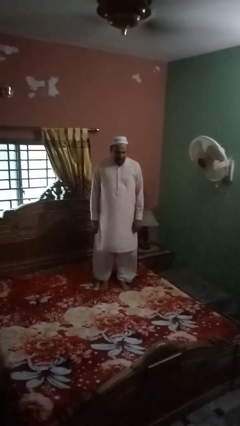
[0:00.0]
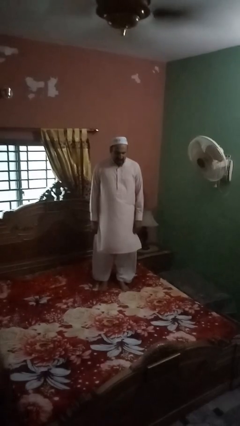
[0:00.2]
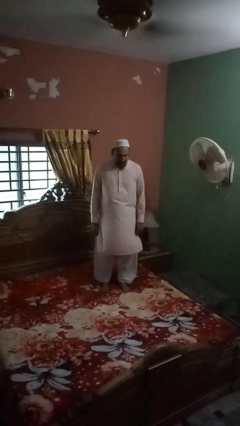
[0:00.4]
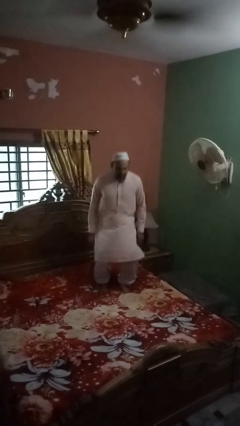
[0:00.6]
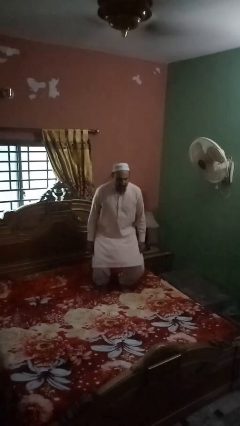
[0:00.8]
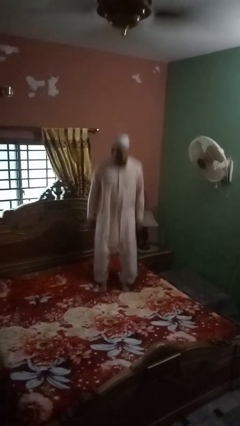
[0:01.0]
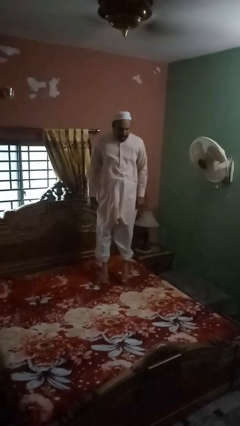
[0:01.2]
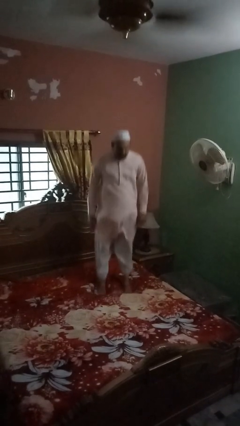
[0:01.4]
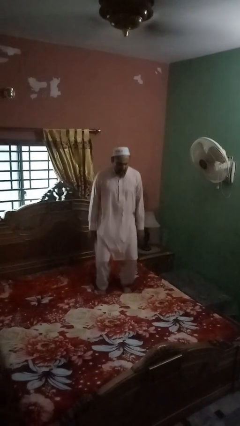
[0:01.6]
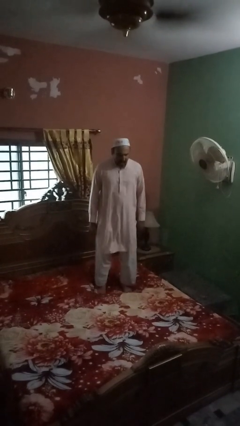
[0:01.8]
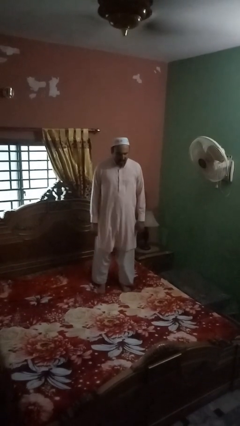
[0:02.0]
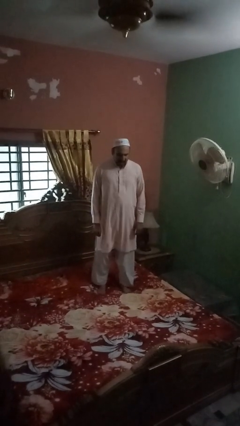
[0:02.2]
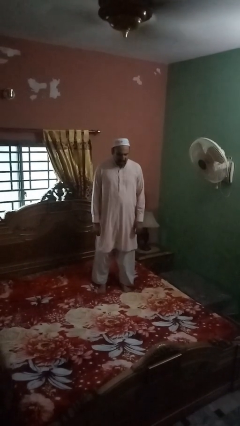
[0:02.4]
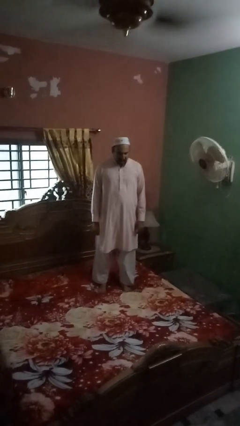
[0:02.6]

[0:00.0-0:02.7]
person jumps on bed

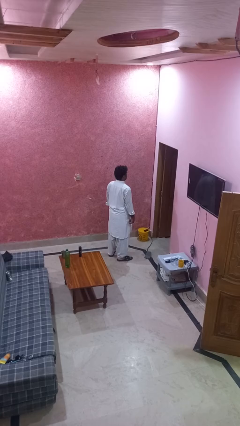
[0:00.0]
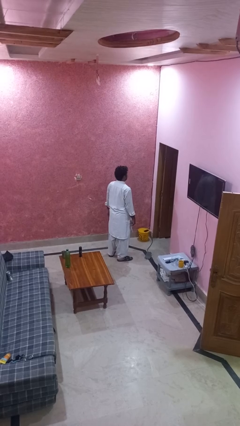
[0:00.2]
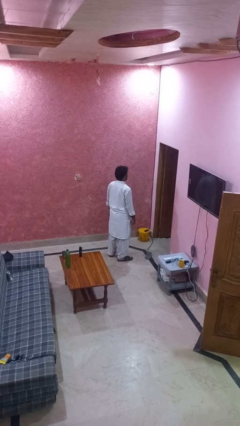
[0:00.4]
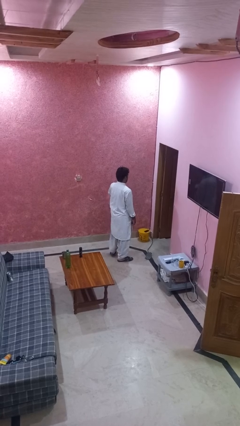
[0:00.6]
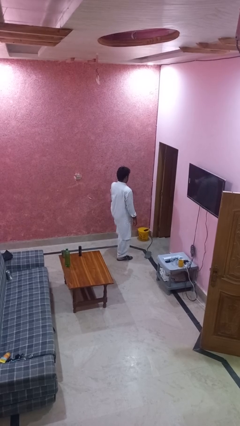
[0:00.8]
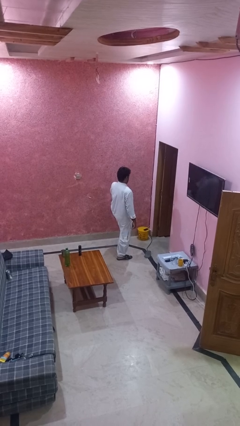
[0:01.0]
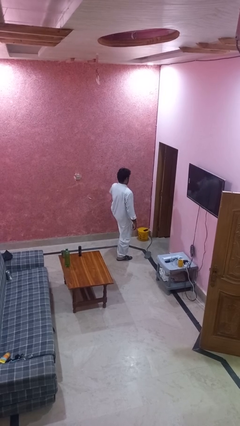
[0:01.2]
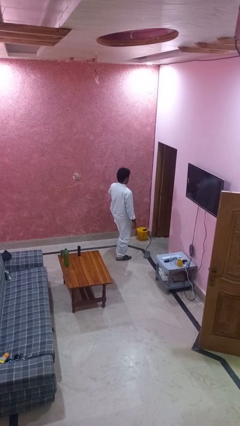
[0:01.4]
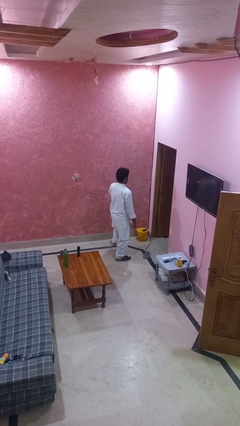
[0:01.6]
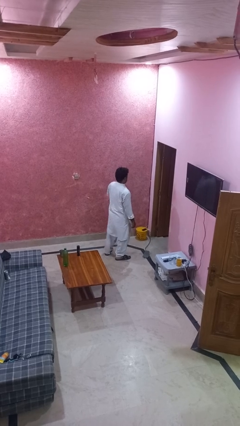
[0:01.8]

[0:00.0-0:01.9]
person slaps hands on thighs

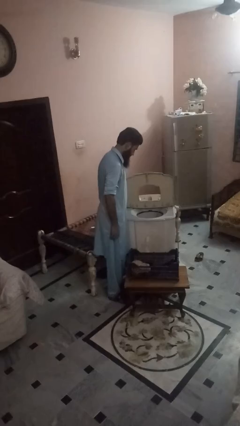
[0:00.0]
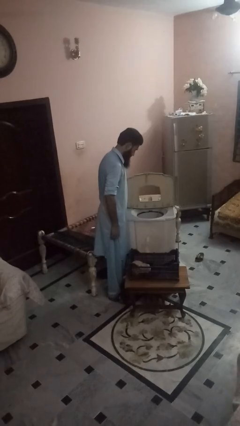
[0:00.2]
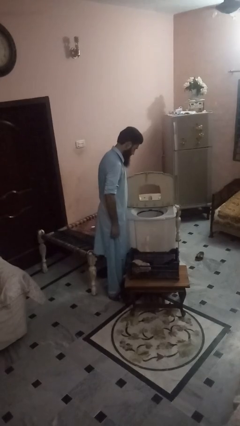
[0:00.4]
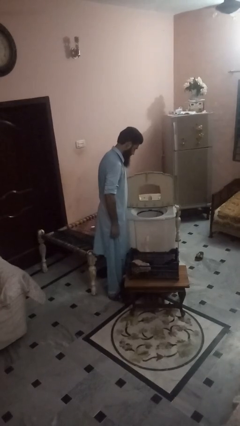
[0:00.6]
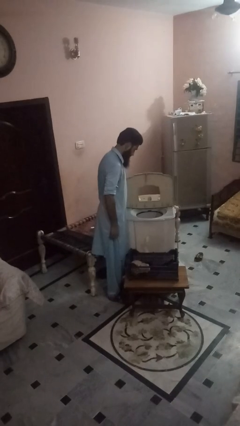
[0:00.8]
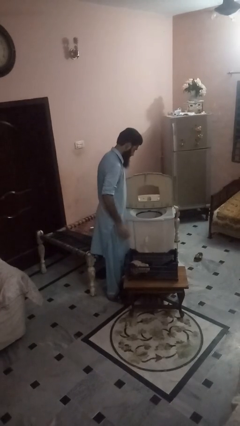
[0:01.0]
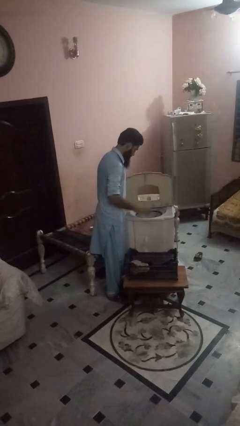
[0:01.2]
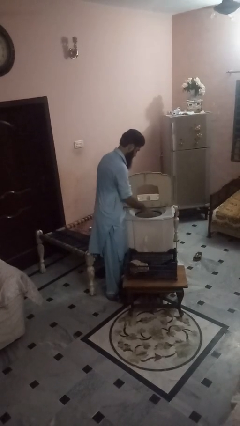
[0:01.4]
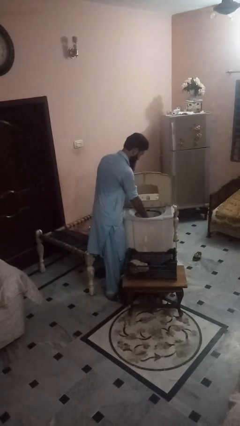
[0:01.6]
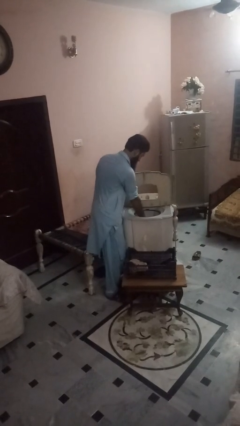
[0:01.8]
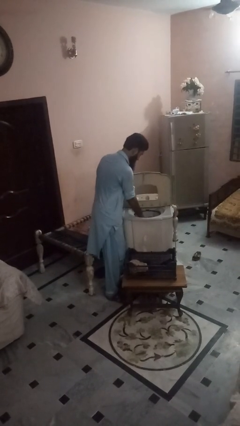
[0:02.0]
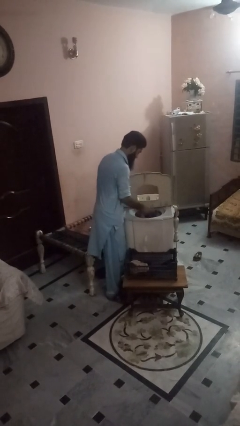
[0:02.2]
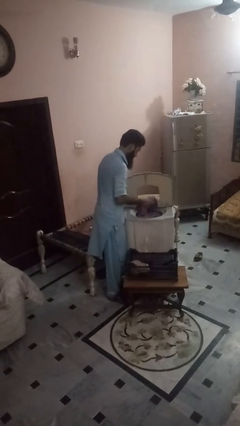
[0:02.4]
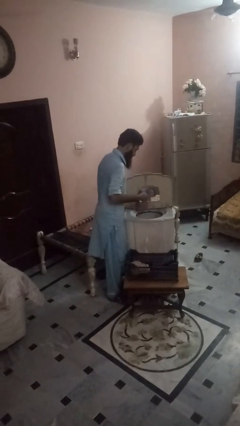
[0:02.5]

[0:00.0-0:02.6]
person unloads dishwasher

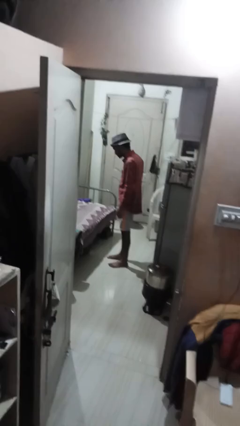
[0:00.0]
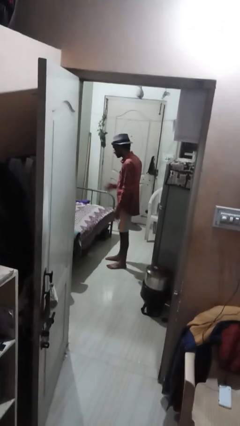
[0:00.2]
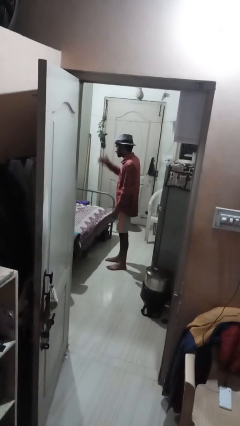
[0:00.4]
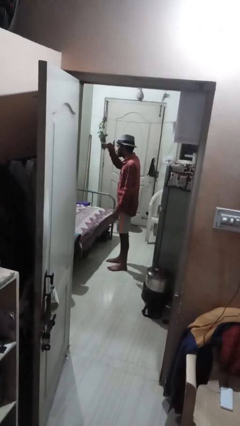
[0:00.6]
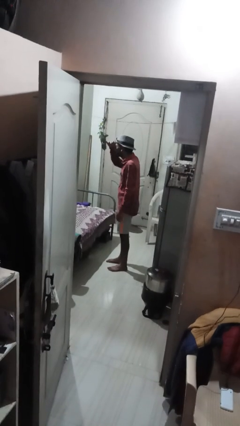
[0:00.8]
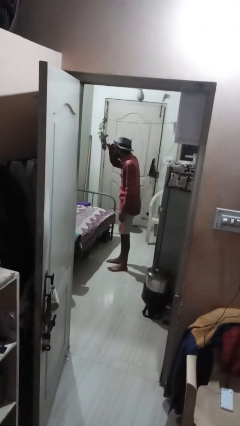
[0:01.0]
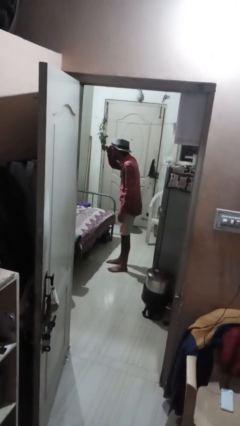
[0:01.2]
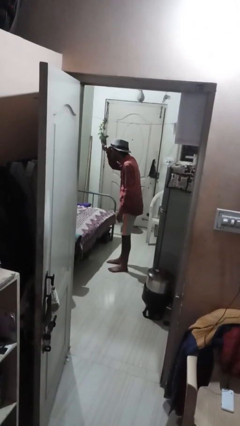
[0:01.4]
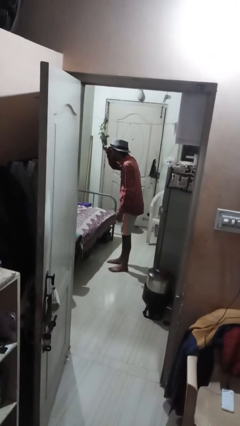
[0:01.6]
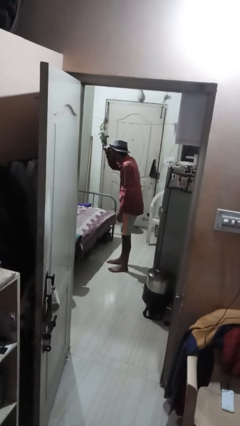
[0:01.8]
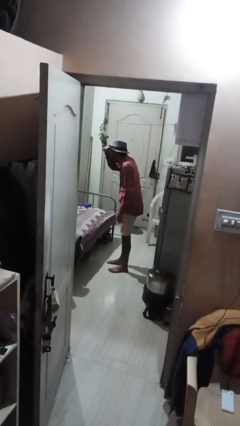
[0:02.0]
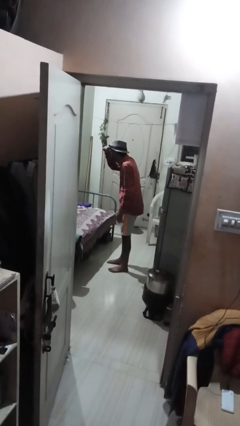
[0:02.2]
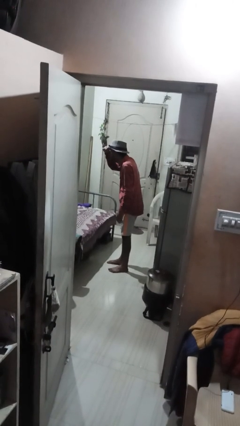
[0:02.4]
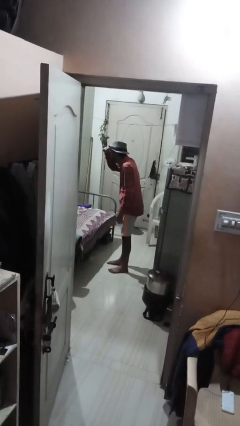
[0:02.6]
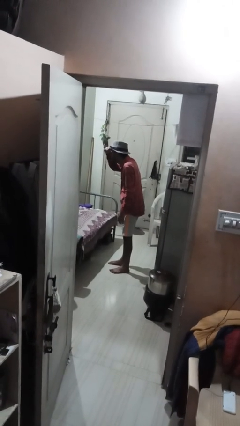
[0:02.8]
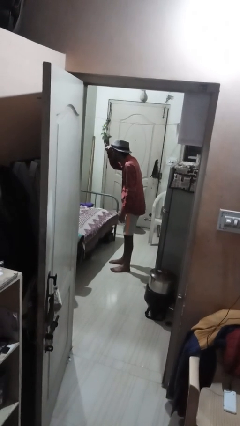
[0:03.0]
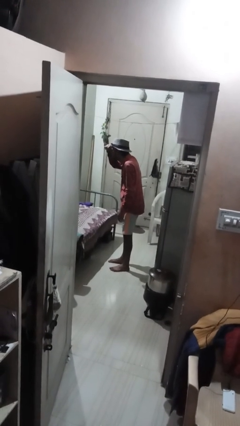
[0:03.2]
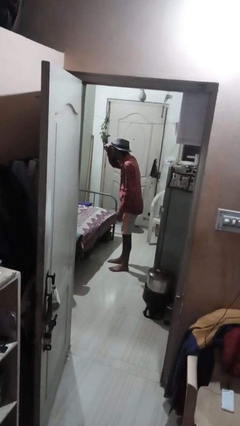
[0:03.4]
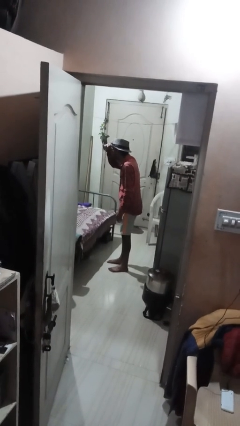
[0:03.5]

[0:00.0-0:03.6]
person shades eyes

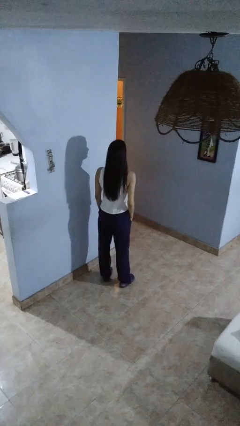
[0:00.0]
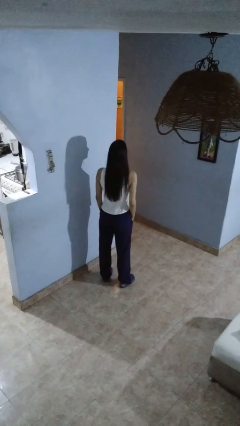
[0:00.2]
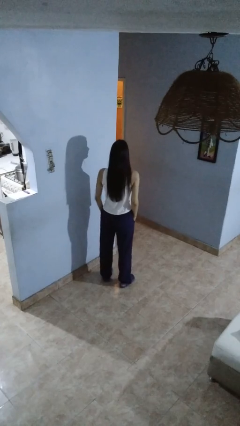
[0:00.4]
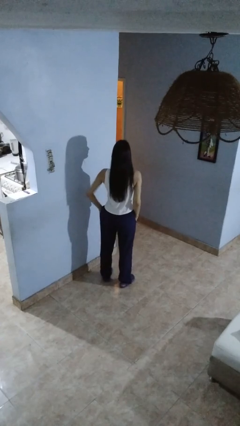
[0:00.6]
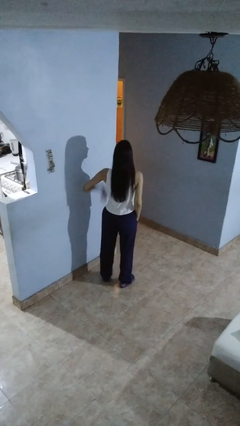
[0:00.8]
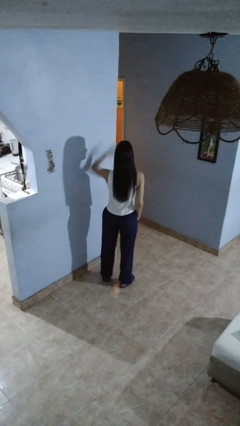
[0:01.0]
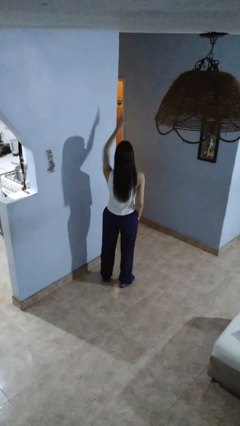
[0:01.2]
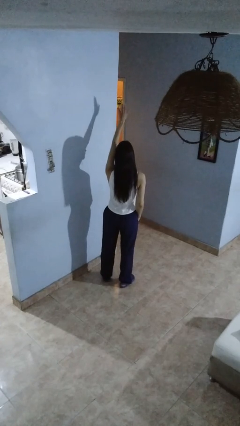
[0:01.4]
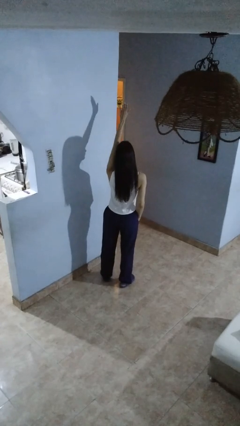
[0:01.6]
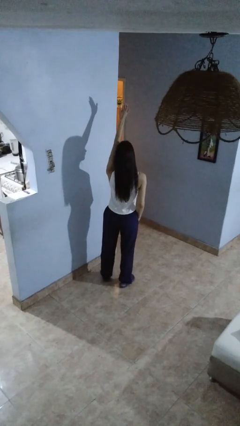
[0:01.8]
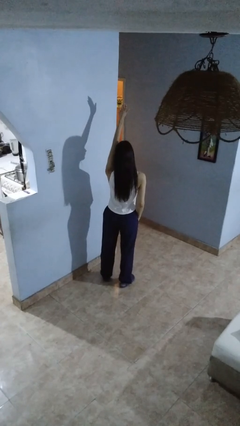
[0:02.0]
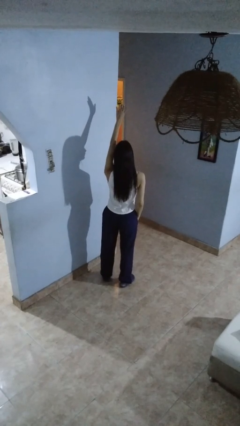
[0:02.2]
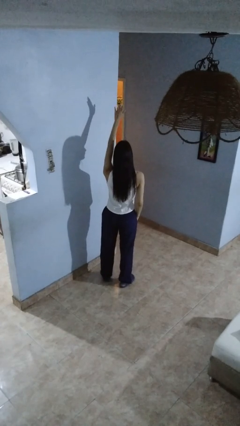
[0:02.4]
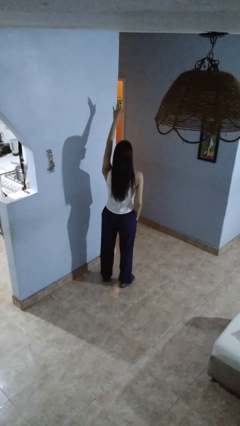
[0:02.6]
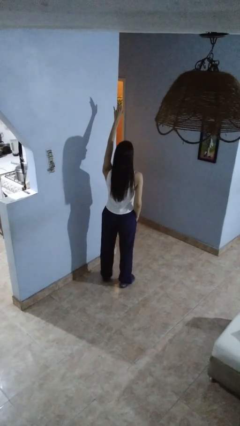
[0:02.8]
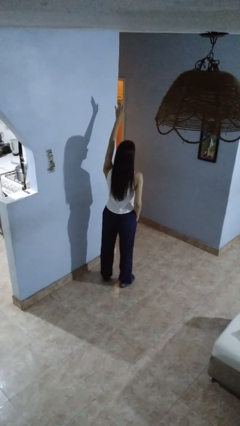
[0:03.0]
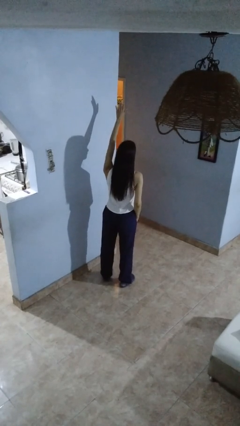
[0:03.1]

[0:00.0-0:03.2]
person gestures raise hand

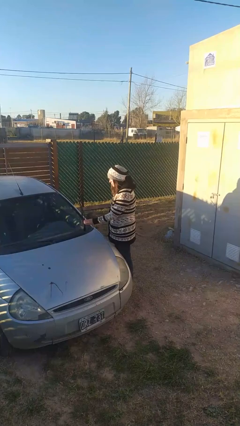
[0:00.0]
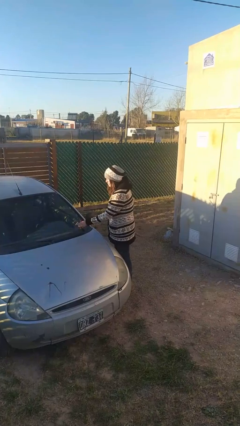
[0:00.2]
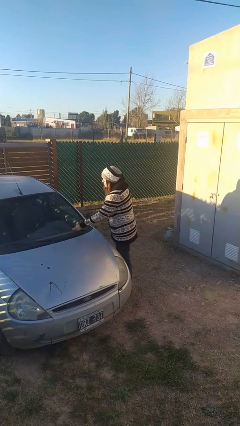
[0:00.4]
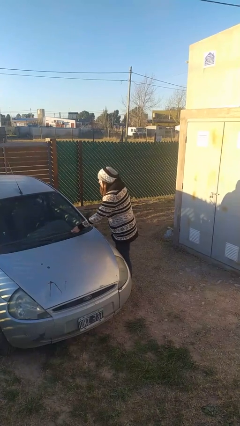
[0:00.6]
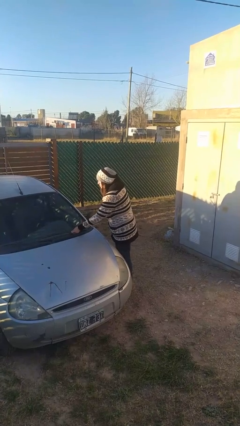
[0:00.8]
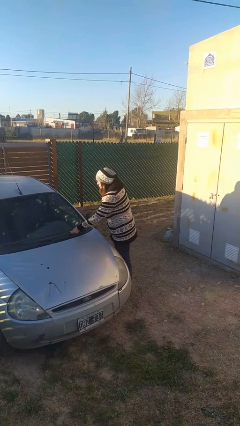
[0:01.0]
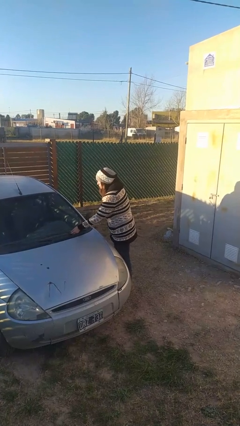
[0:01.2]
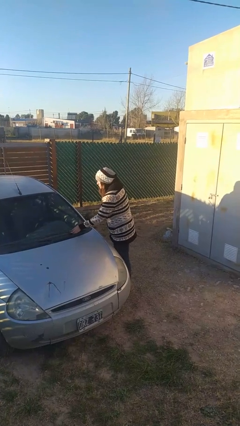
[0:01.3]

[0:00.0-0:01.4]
person flips down car wipers

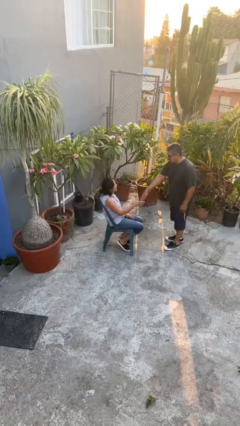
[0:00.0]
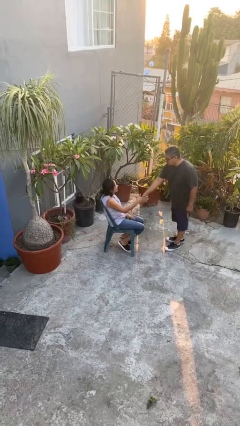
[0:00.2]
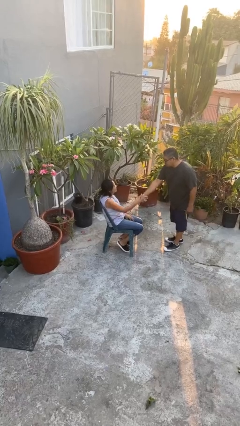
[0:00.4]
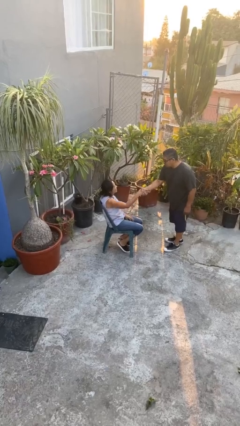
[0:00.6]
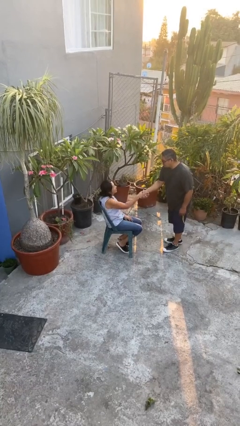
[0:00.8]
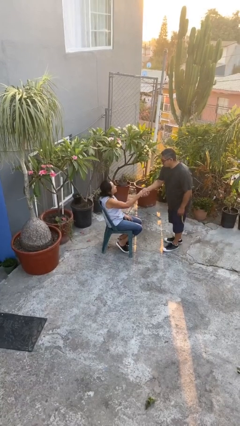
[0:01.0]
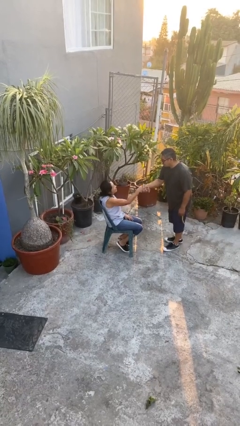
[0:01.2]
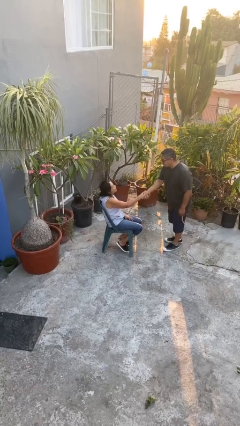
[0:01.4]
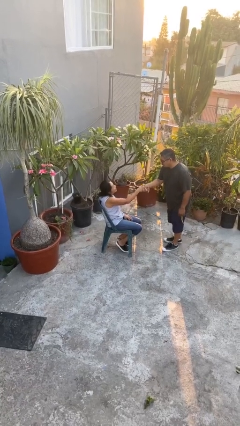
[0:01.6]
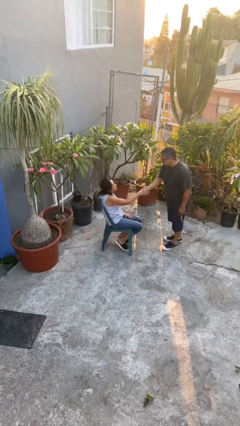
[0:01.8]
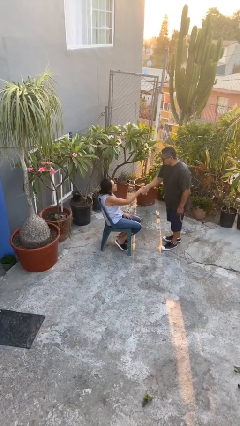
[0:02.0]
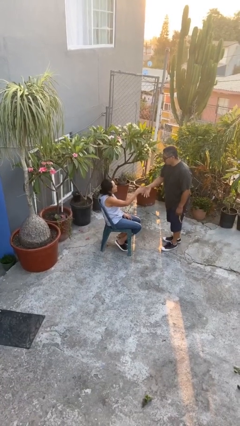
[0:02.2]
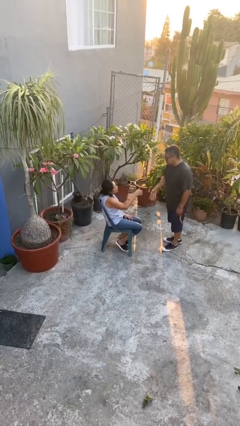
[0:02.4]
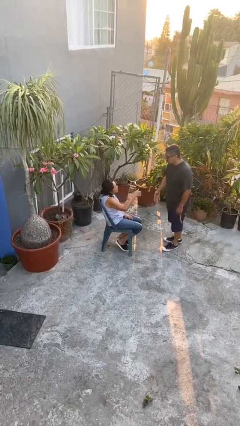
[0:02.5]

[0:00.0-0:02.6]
person shakes hand
